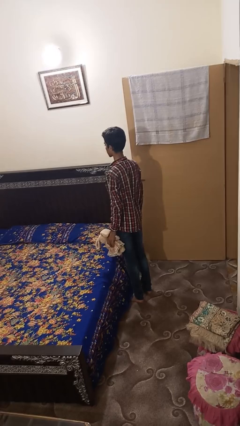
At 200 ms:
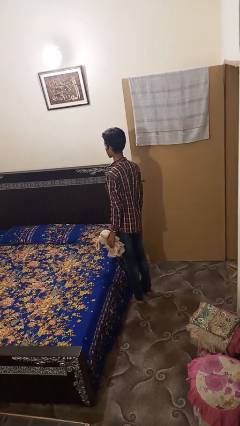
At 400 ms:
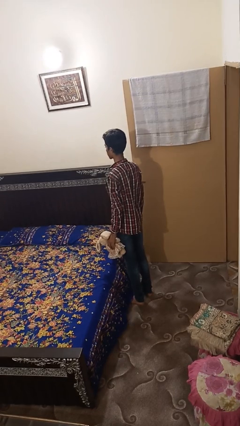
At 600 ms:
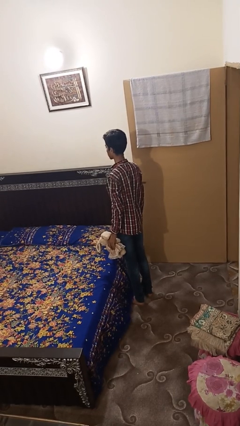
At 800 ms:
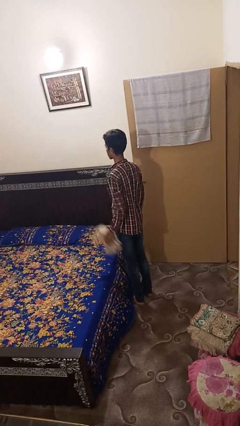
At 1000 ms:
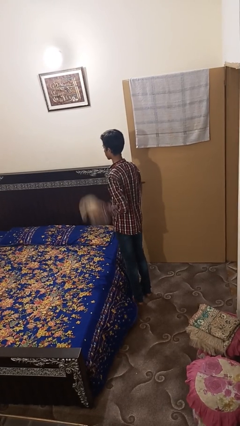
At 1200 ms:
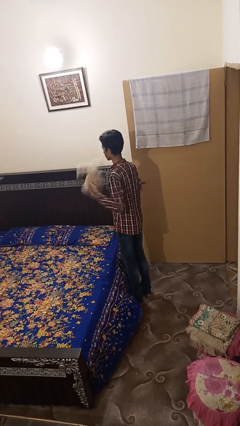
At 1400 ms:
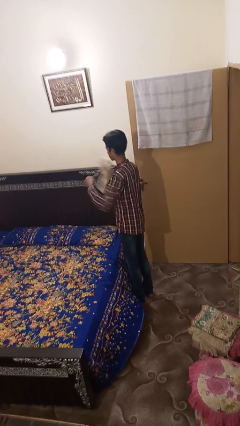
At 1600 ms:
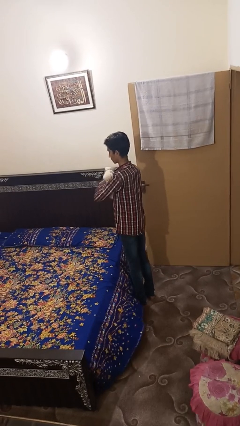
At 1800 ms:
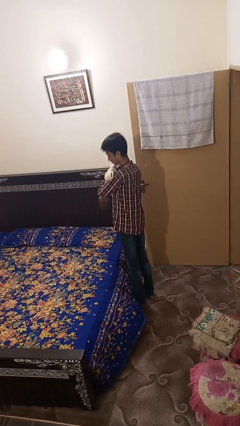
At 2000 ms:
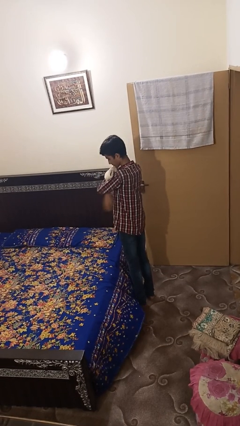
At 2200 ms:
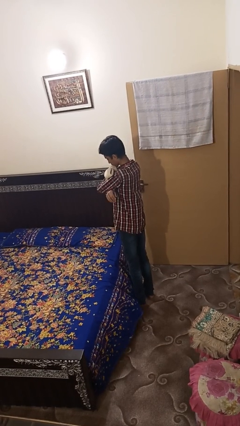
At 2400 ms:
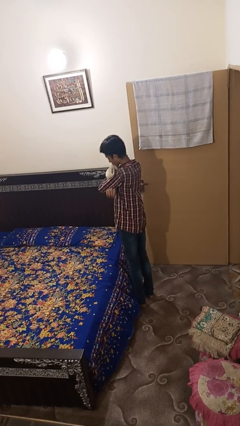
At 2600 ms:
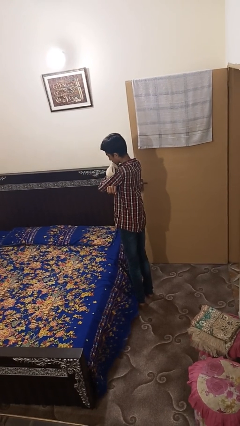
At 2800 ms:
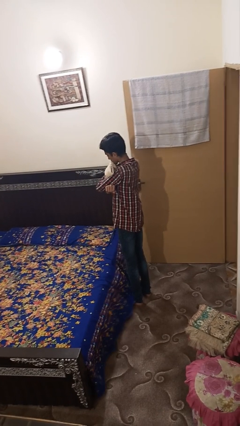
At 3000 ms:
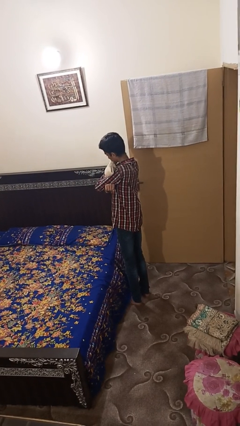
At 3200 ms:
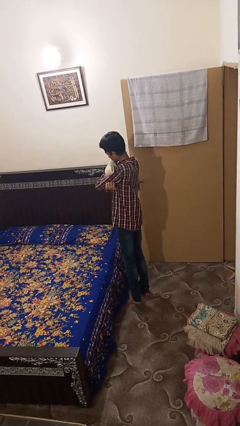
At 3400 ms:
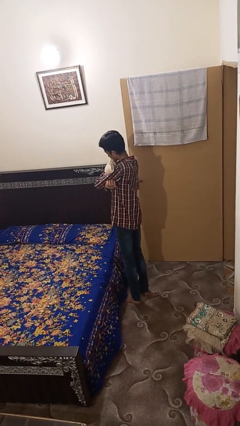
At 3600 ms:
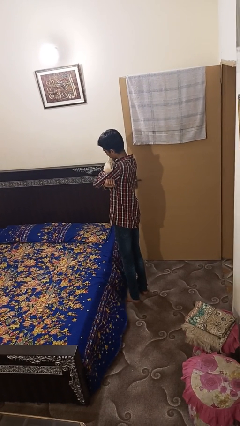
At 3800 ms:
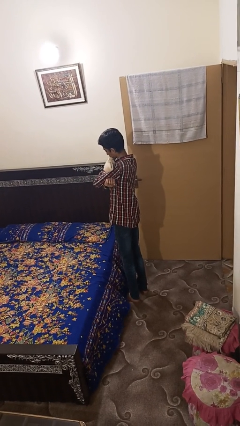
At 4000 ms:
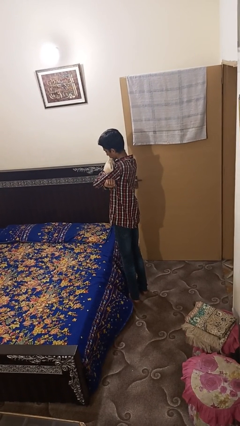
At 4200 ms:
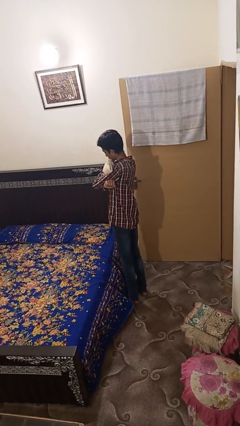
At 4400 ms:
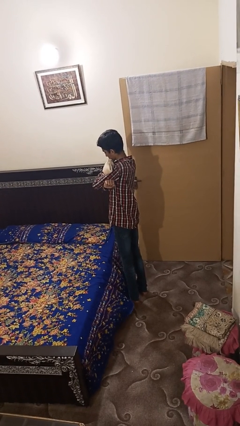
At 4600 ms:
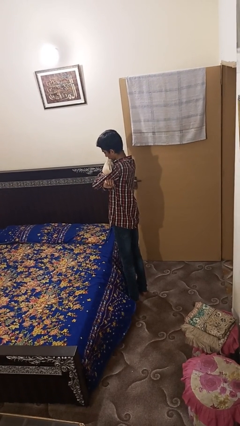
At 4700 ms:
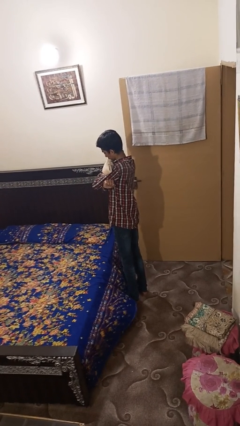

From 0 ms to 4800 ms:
person hugs stuffed animal

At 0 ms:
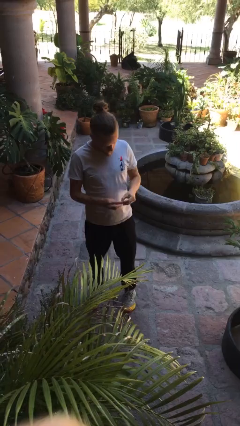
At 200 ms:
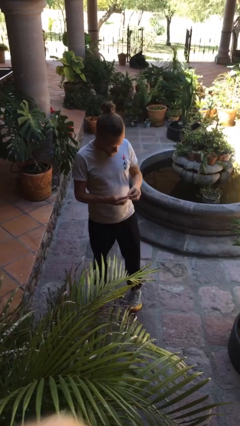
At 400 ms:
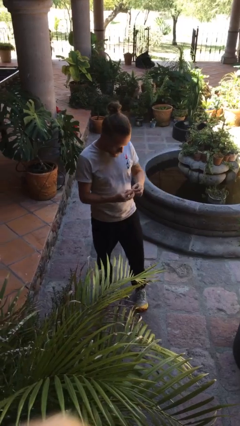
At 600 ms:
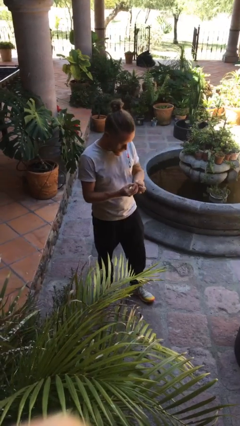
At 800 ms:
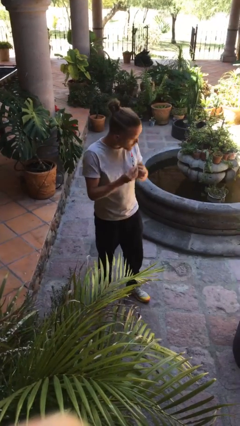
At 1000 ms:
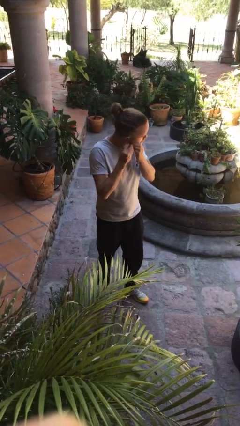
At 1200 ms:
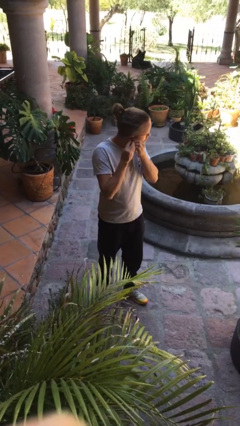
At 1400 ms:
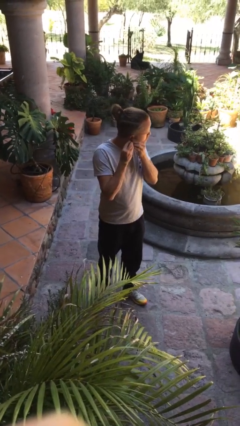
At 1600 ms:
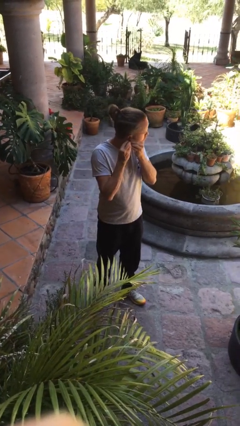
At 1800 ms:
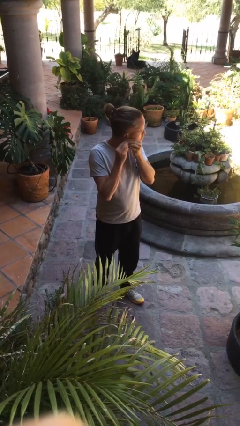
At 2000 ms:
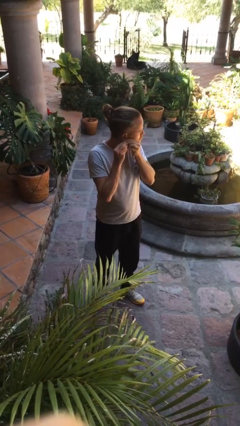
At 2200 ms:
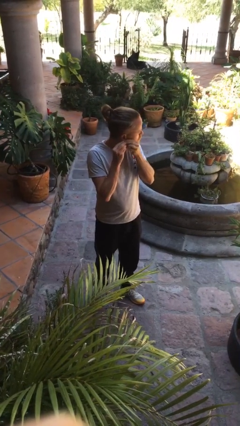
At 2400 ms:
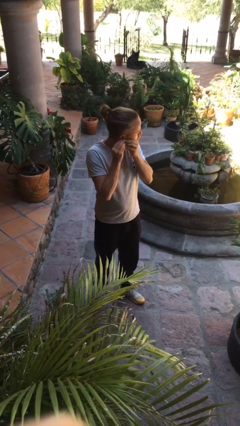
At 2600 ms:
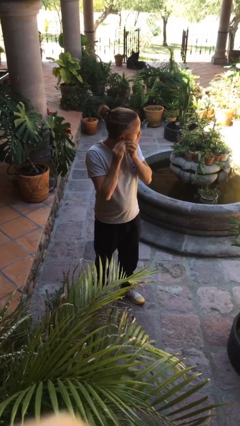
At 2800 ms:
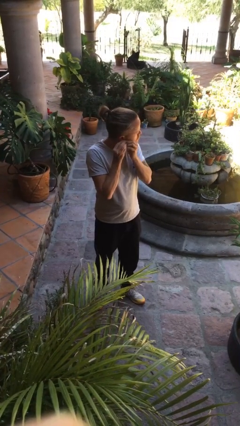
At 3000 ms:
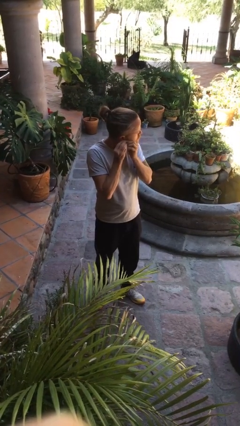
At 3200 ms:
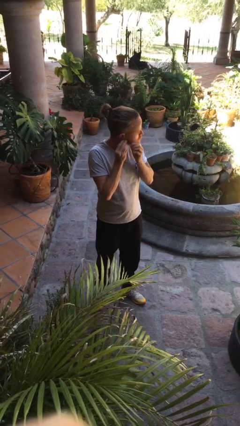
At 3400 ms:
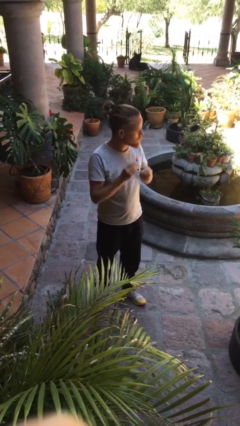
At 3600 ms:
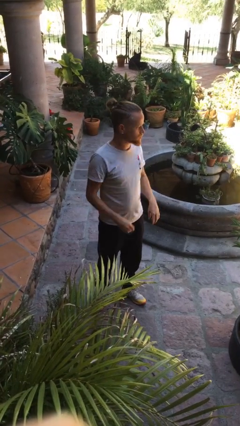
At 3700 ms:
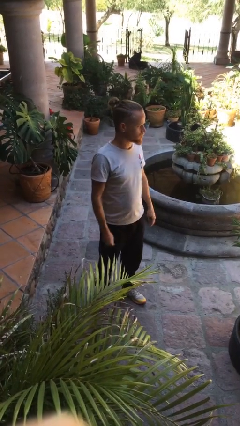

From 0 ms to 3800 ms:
person puts on earrings

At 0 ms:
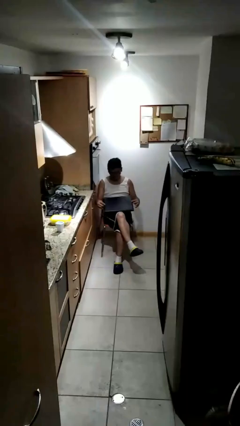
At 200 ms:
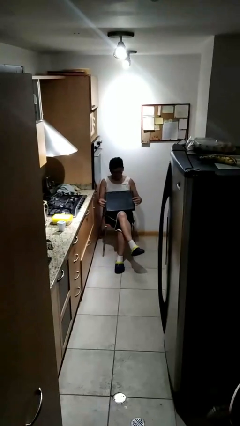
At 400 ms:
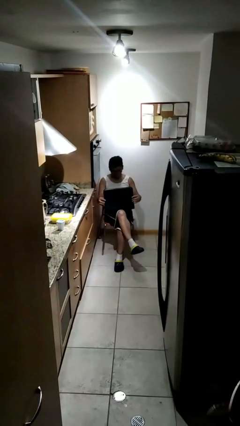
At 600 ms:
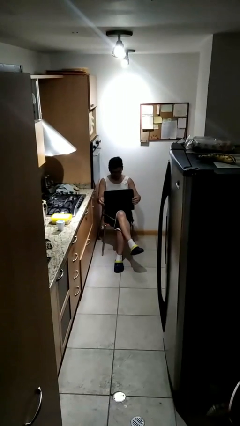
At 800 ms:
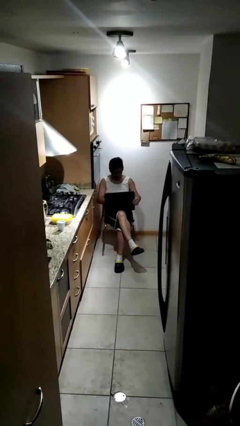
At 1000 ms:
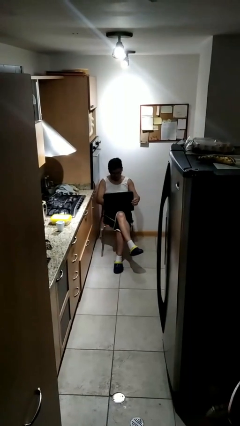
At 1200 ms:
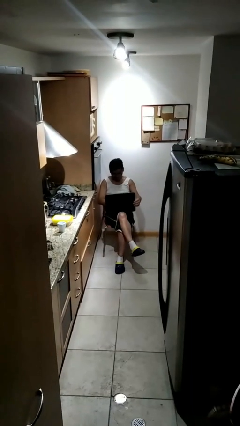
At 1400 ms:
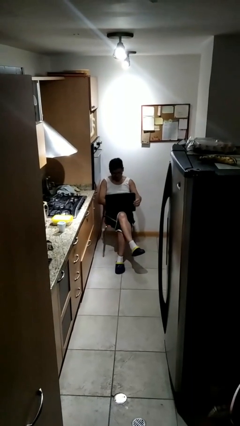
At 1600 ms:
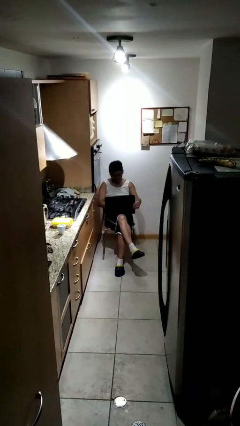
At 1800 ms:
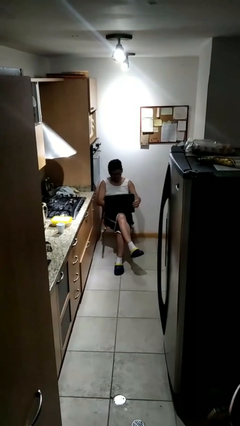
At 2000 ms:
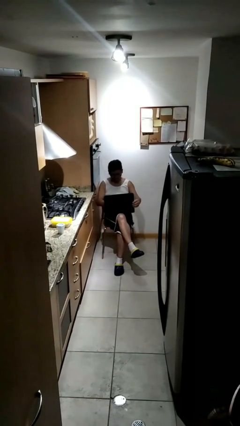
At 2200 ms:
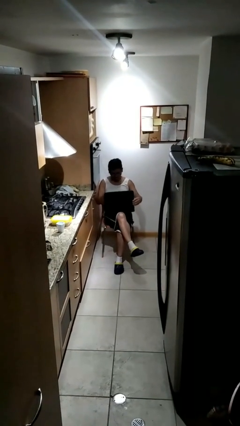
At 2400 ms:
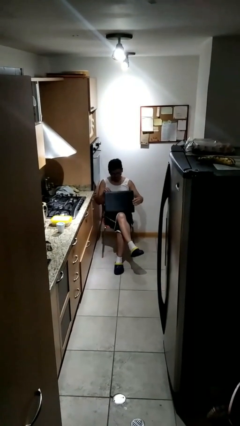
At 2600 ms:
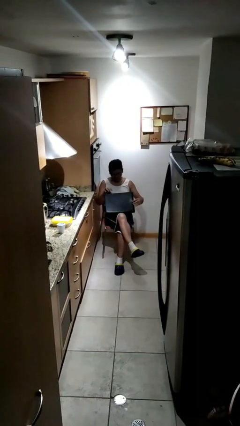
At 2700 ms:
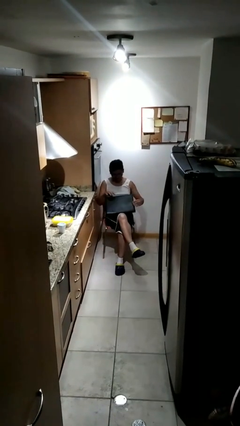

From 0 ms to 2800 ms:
person interacts with laptop

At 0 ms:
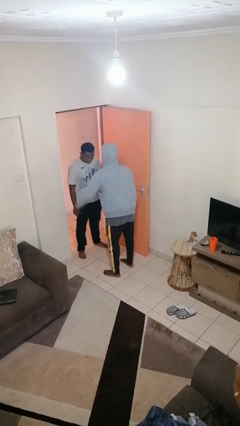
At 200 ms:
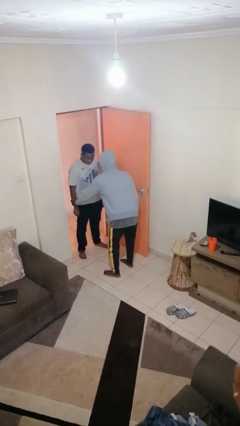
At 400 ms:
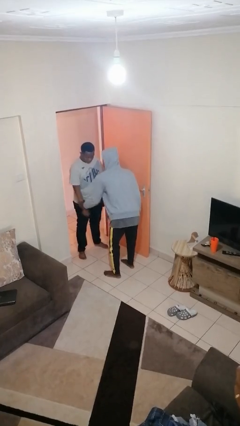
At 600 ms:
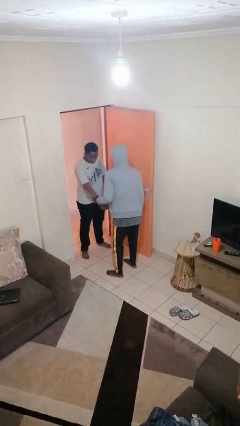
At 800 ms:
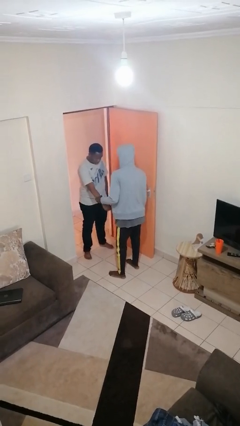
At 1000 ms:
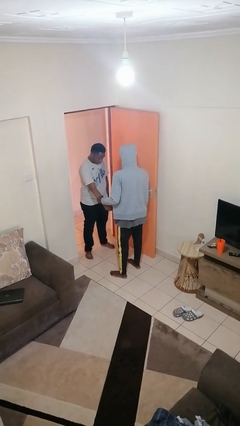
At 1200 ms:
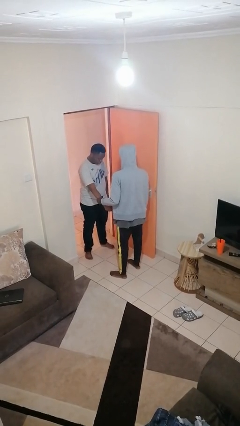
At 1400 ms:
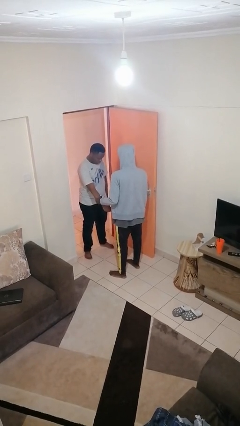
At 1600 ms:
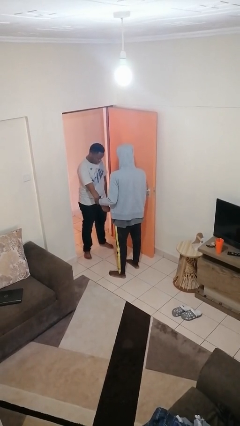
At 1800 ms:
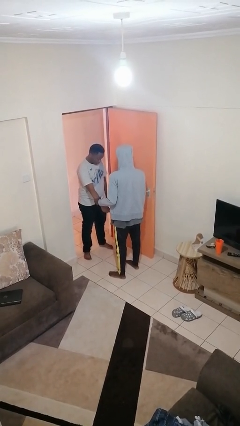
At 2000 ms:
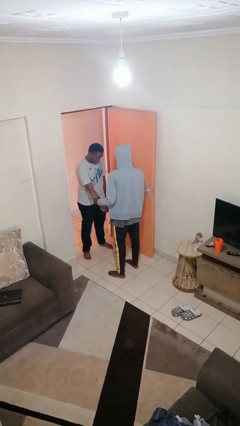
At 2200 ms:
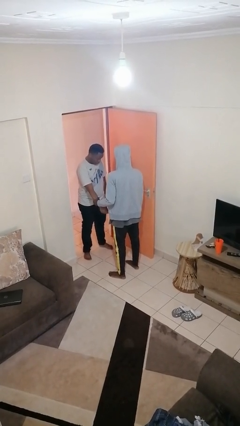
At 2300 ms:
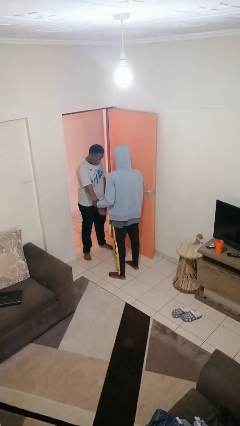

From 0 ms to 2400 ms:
person grabs person by forearm

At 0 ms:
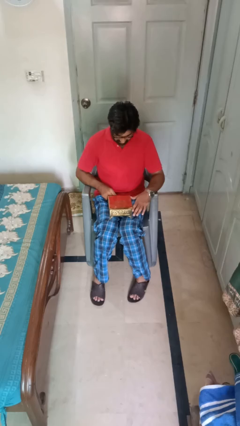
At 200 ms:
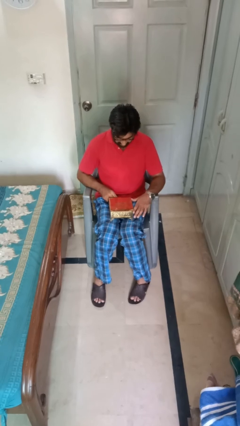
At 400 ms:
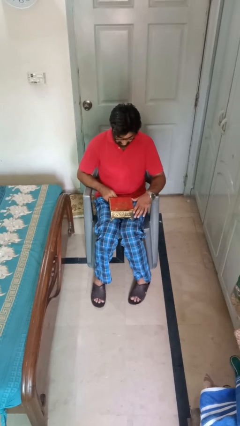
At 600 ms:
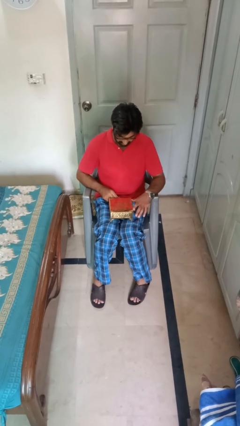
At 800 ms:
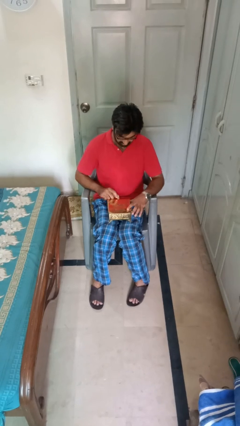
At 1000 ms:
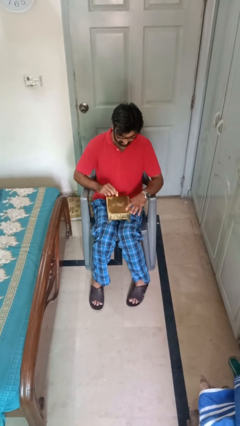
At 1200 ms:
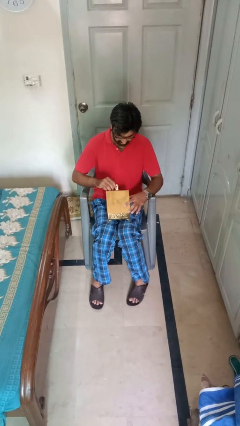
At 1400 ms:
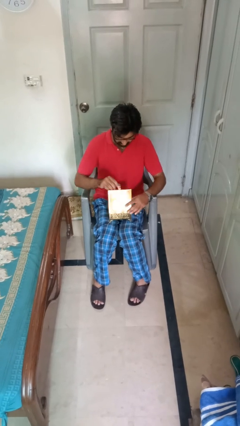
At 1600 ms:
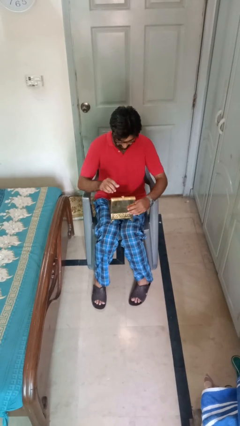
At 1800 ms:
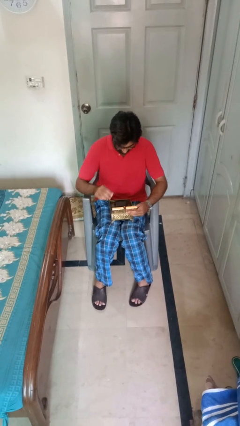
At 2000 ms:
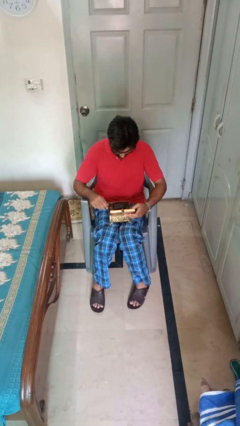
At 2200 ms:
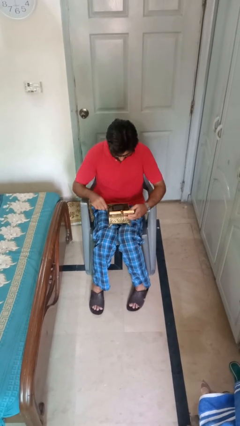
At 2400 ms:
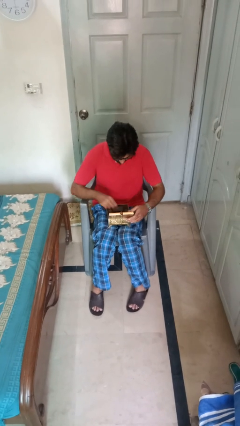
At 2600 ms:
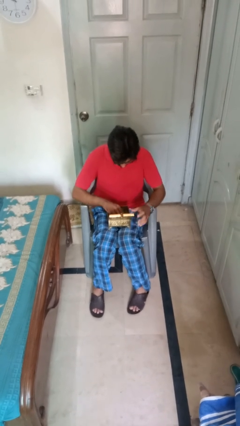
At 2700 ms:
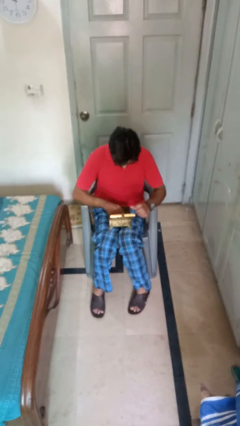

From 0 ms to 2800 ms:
person opens jewelry box

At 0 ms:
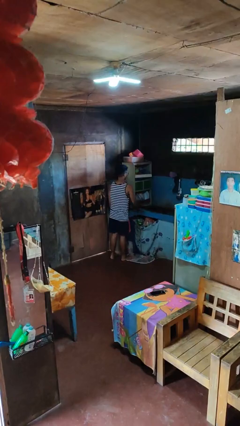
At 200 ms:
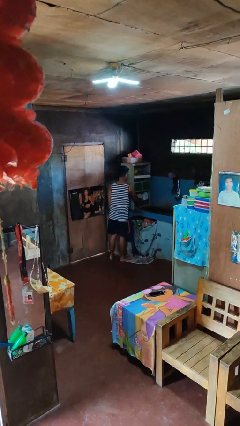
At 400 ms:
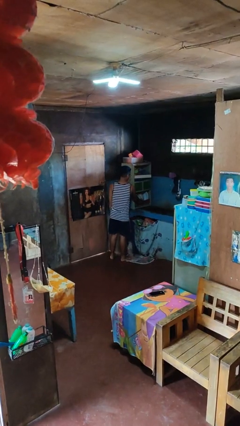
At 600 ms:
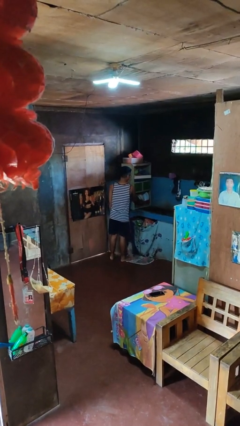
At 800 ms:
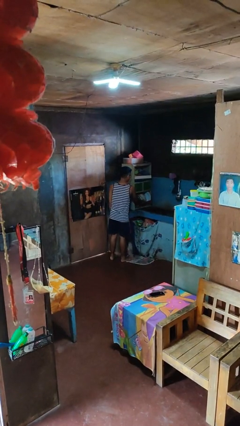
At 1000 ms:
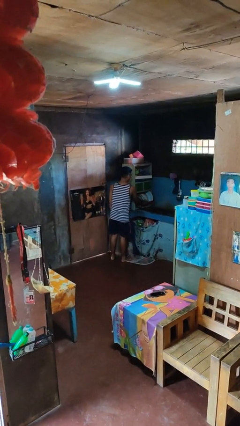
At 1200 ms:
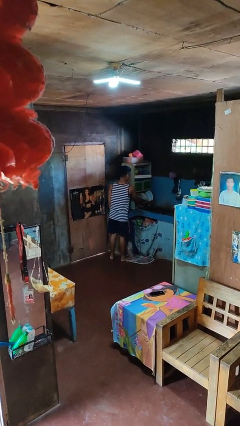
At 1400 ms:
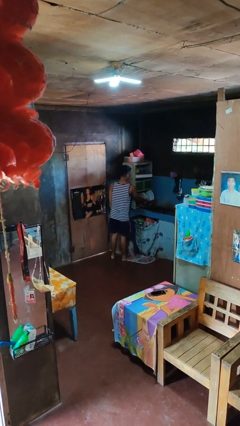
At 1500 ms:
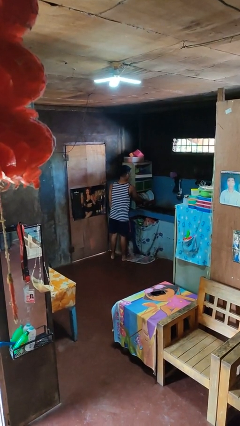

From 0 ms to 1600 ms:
person opens dishwasher
